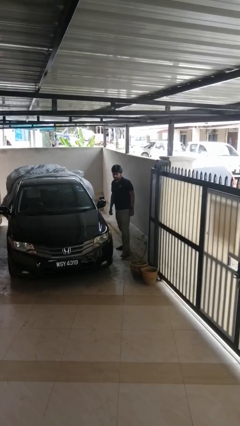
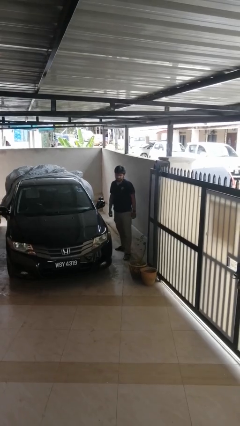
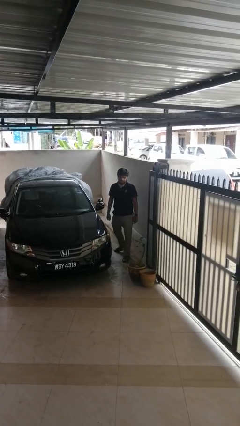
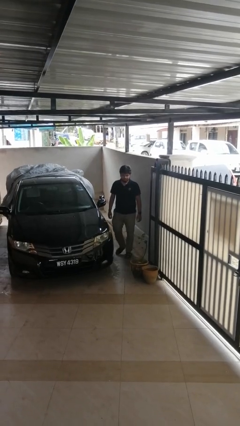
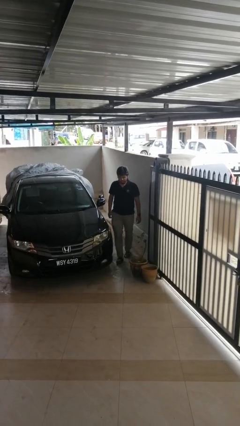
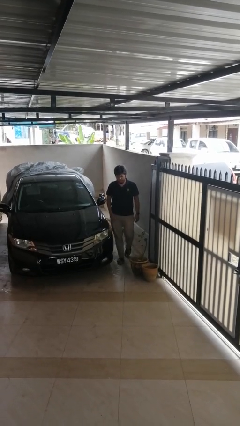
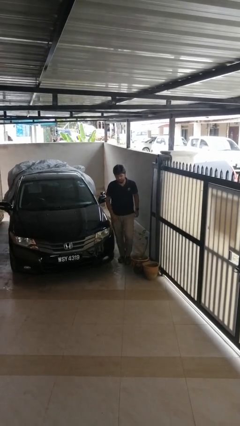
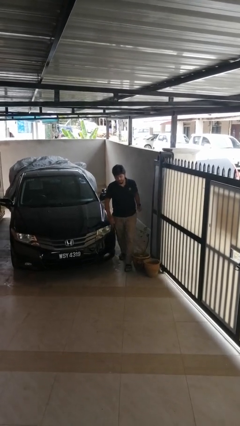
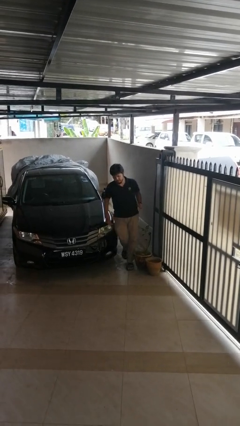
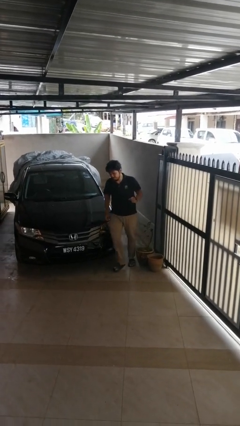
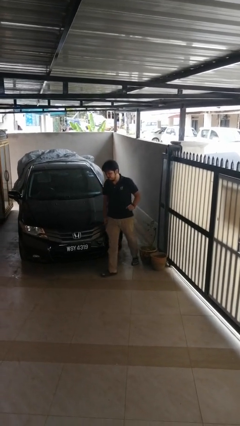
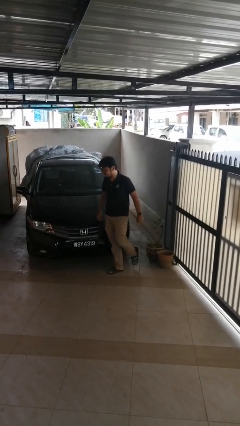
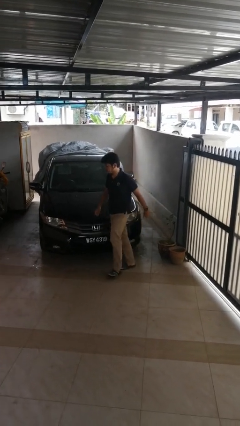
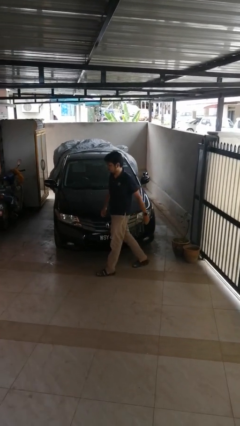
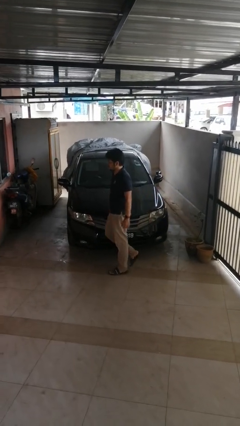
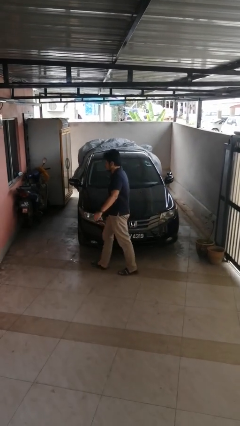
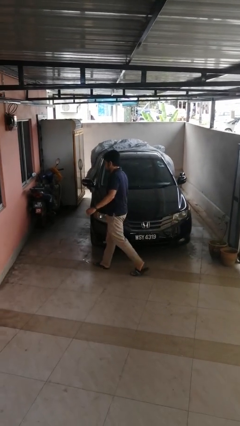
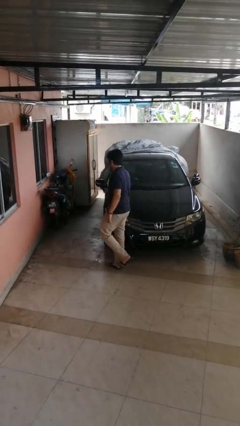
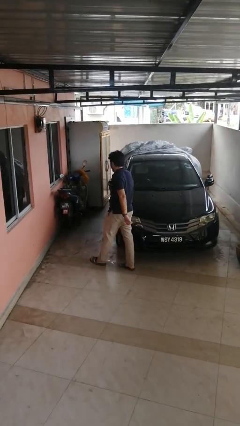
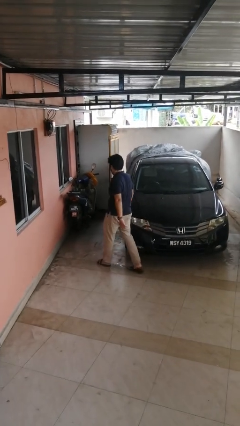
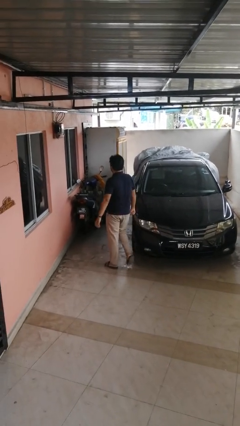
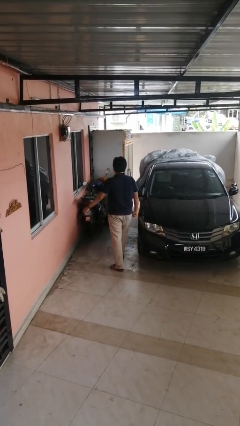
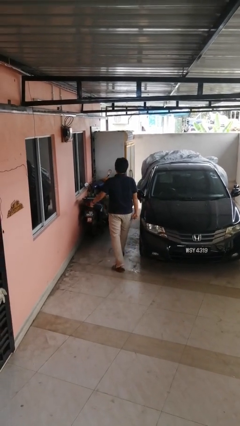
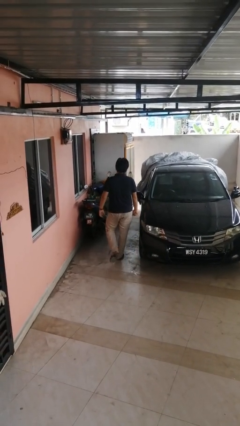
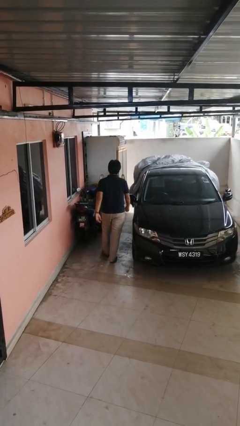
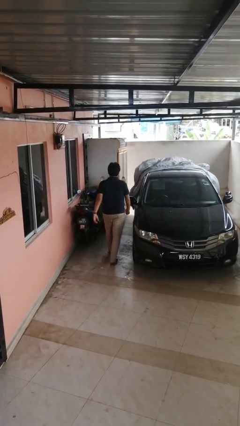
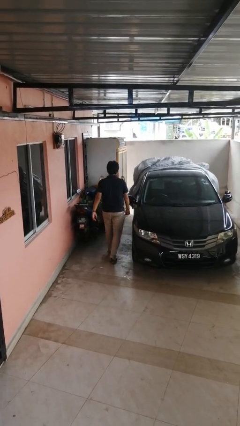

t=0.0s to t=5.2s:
person walks around car

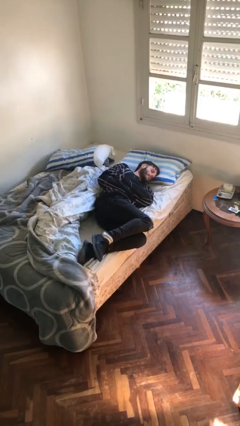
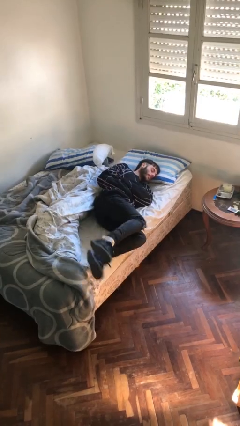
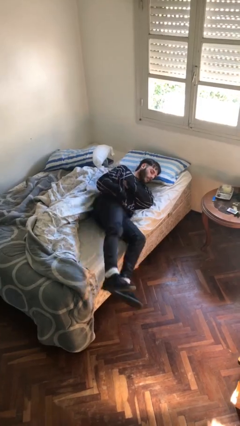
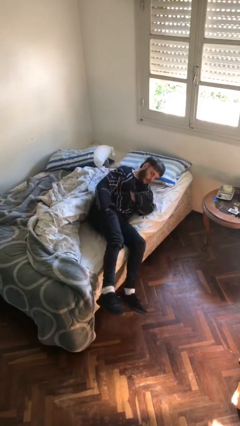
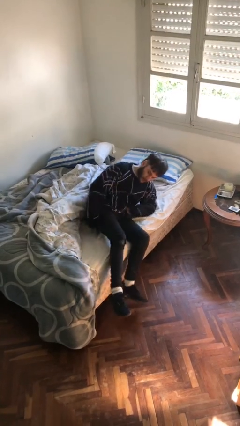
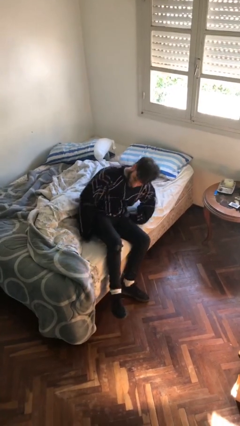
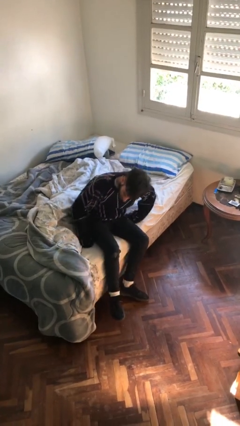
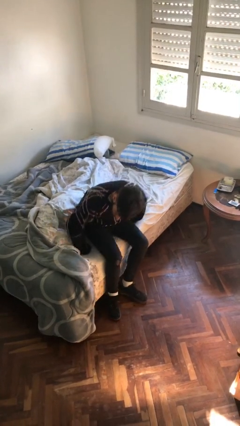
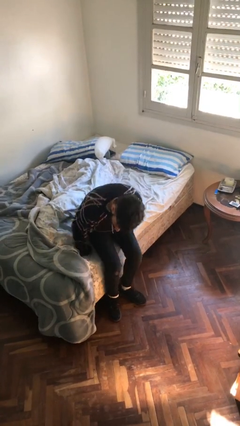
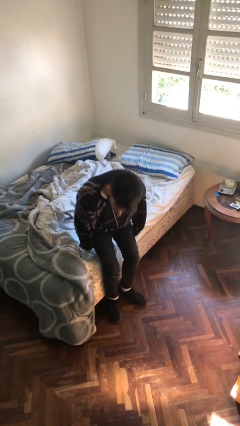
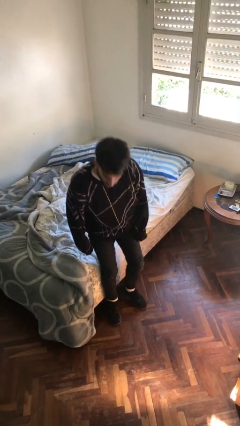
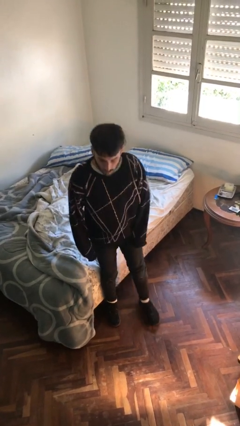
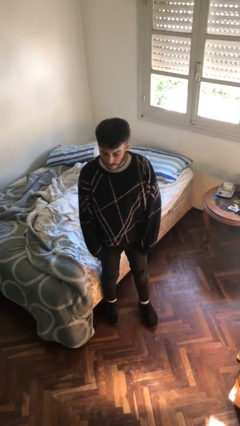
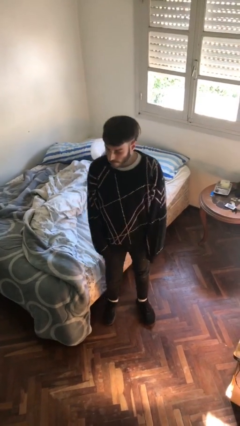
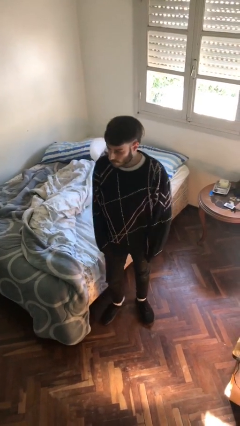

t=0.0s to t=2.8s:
person stands up

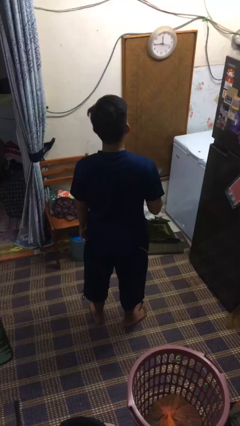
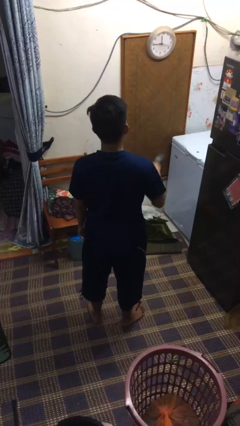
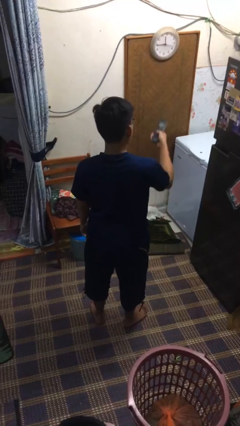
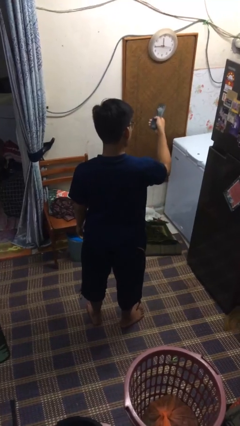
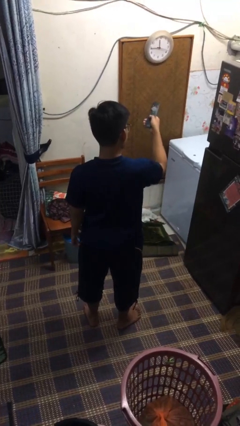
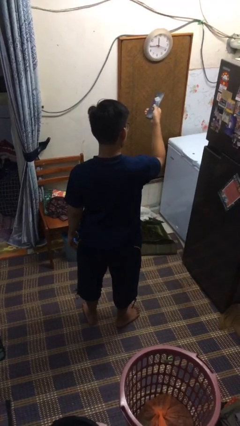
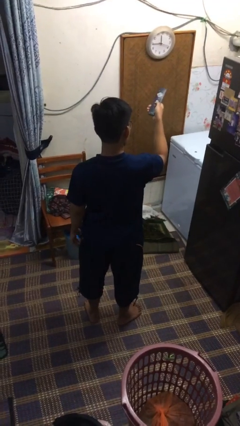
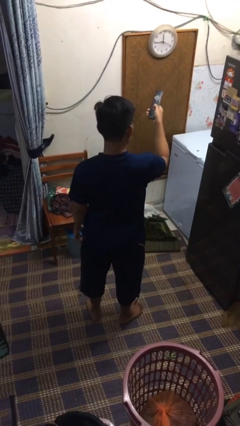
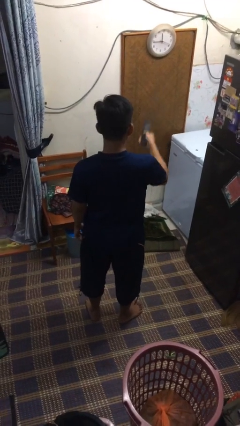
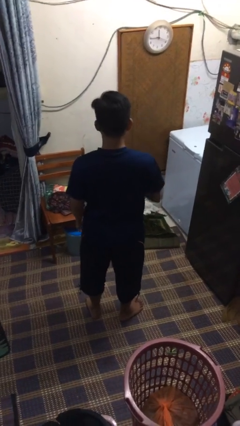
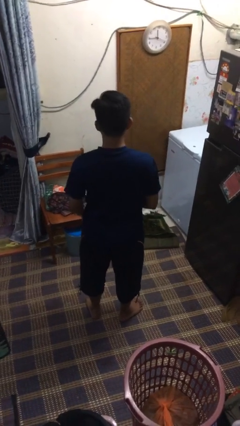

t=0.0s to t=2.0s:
person uses television remote

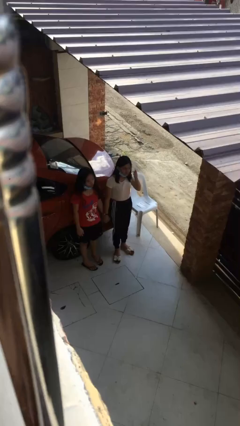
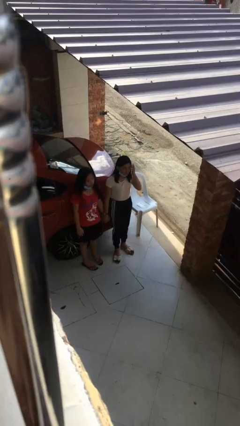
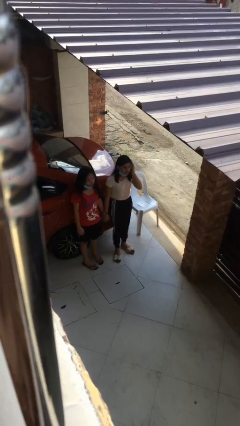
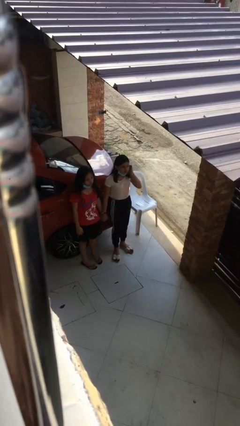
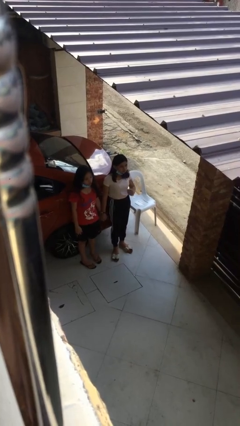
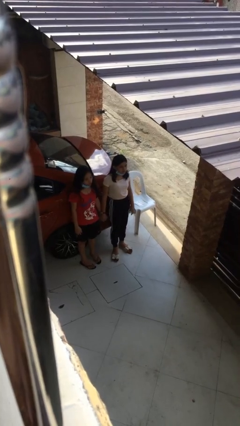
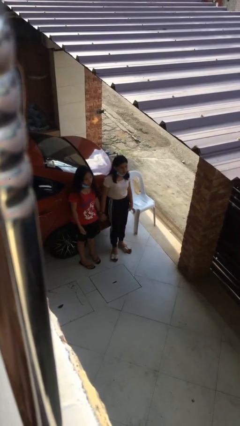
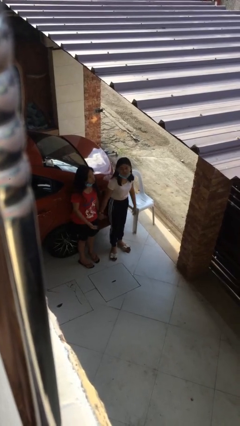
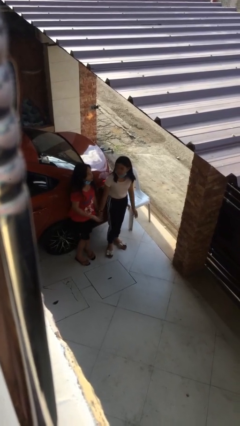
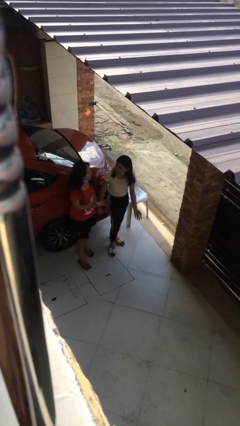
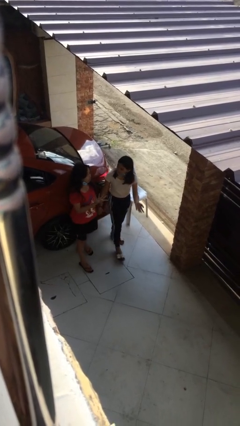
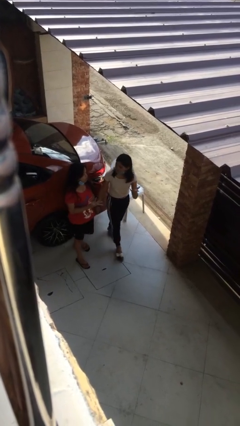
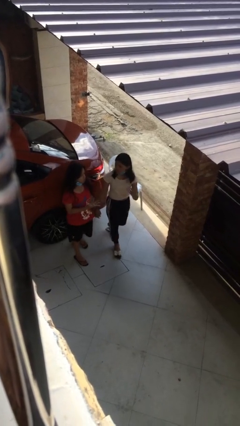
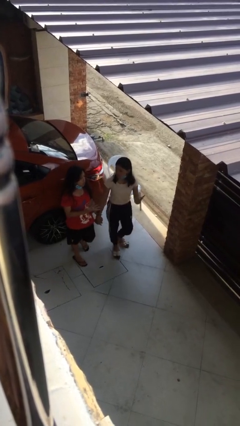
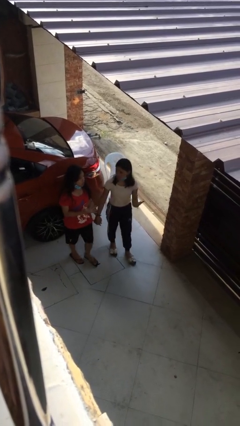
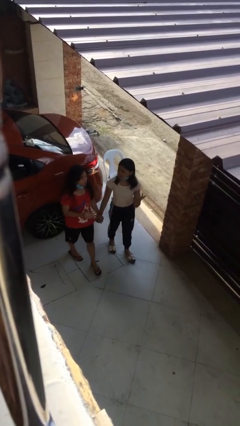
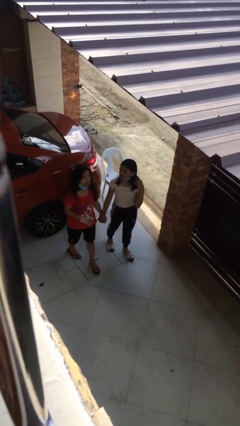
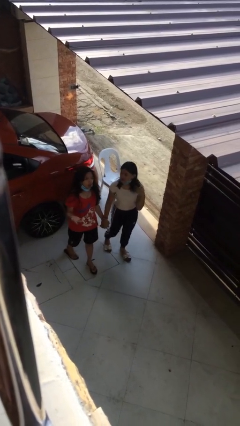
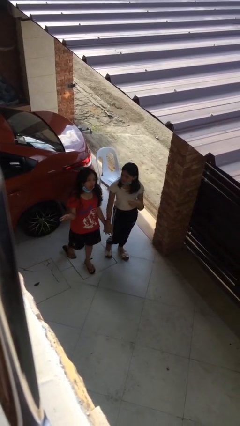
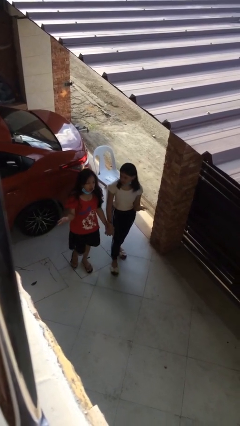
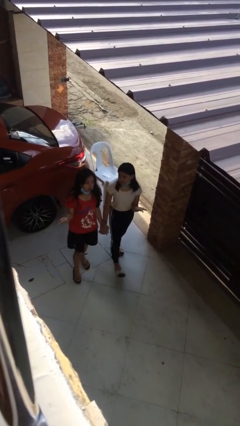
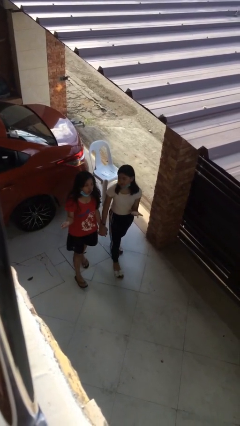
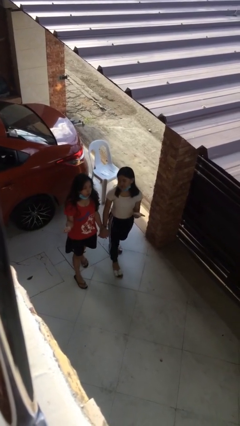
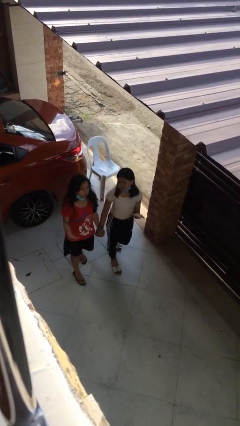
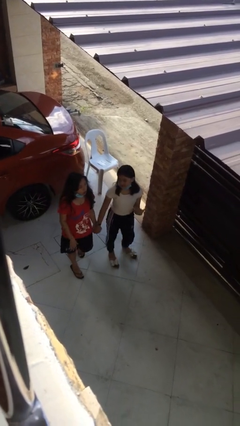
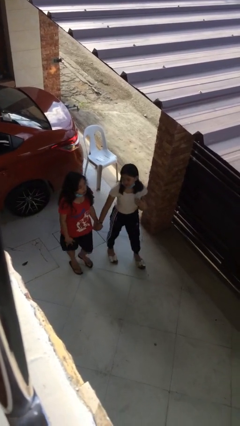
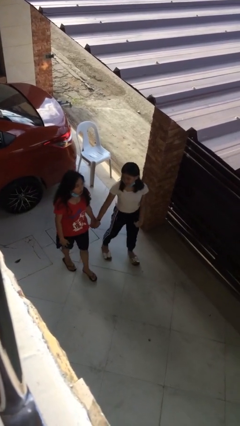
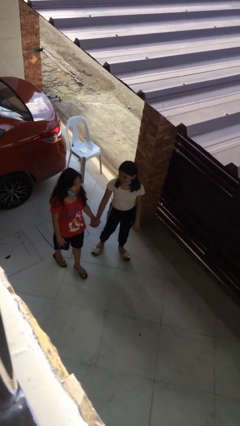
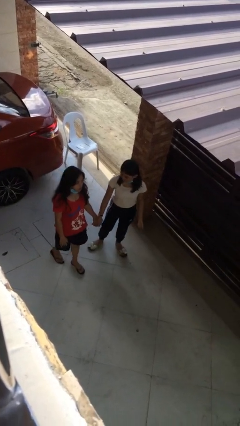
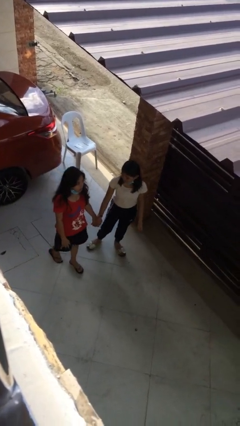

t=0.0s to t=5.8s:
person holds hand

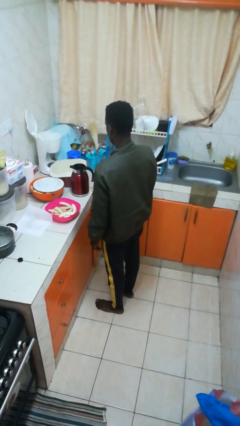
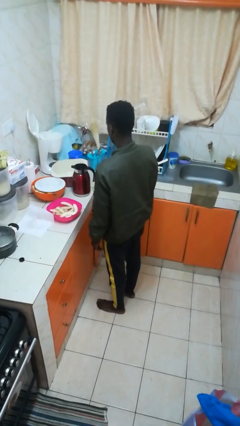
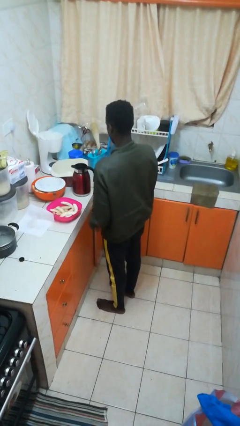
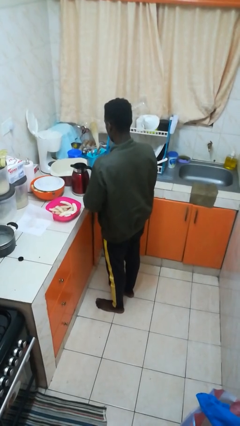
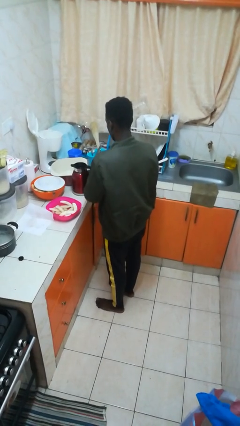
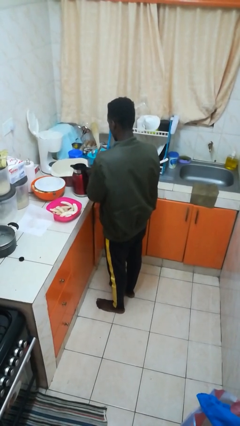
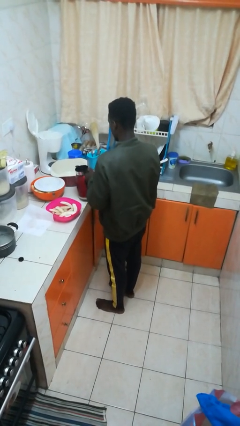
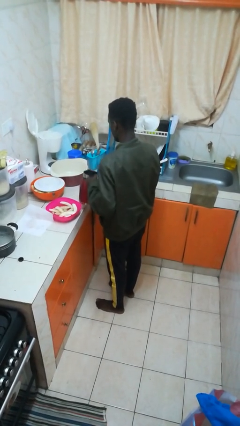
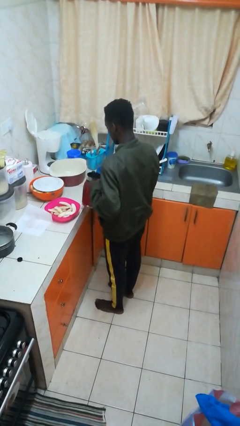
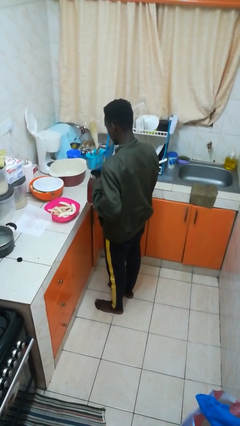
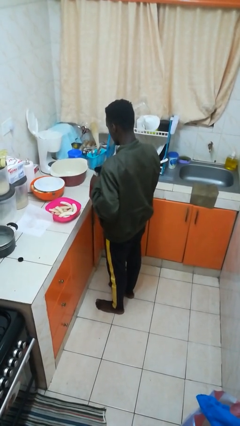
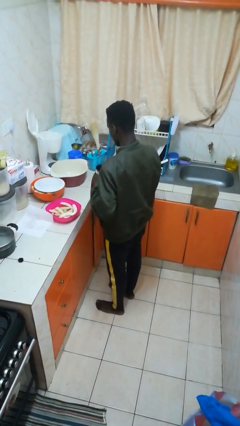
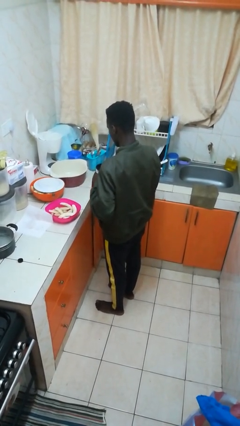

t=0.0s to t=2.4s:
person picks up object from countertop
